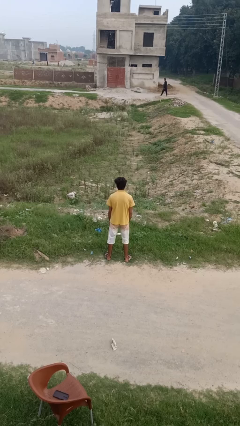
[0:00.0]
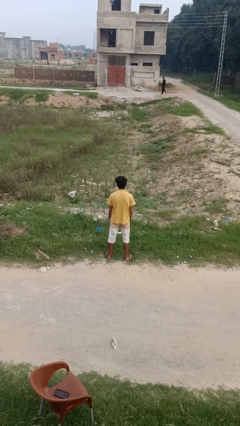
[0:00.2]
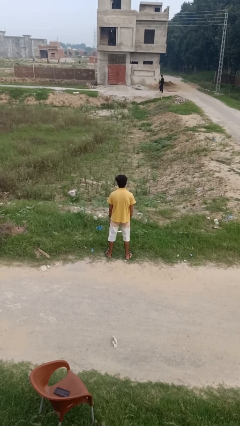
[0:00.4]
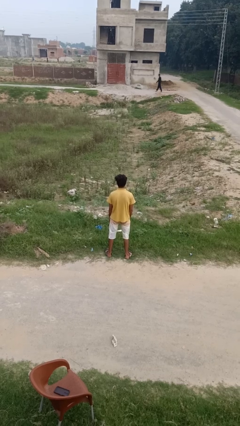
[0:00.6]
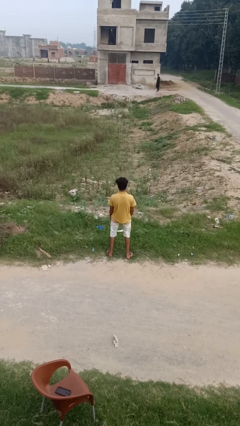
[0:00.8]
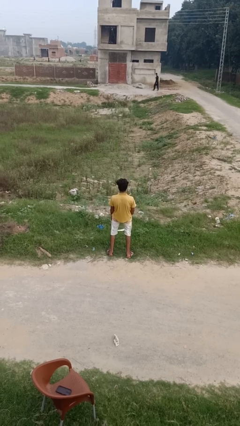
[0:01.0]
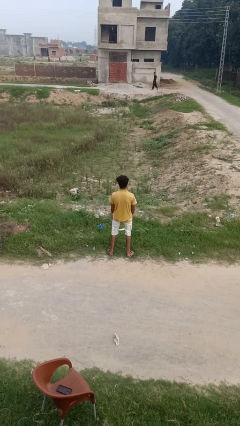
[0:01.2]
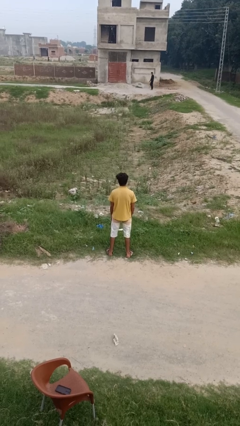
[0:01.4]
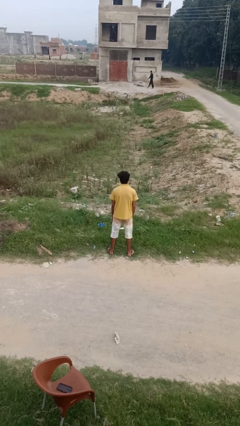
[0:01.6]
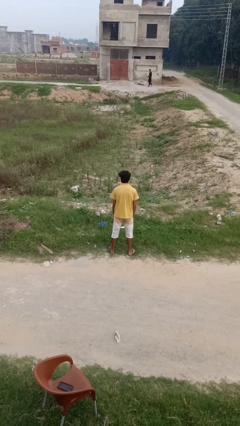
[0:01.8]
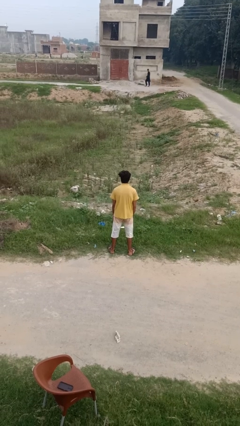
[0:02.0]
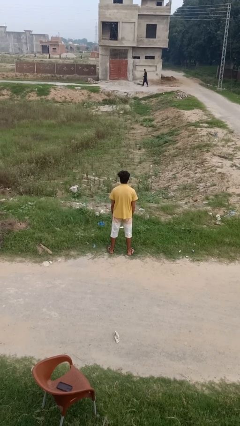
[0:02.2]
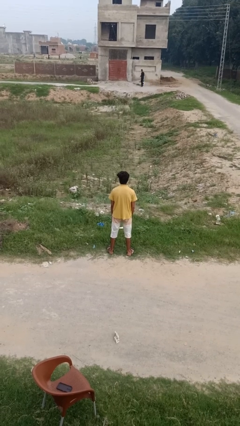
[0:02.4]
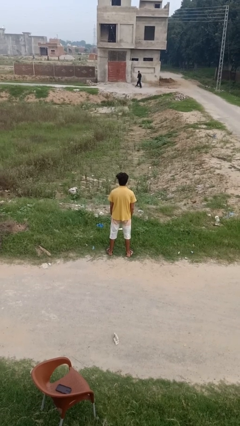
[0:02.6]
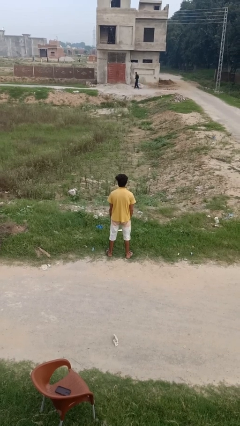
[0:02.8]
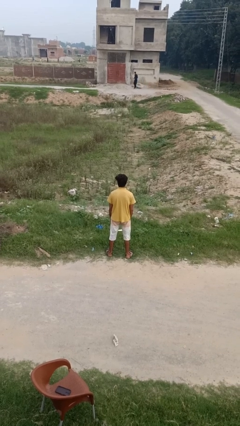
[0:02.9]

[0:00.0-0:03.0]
person wiggles hips

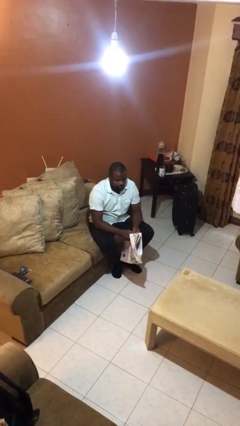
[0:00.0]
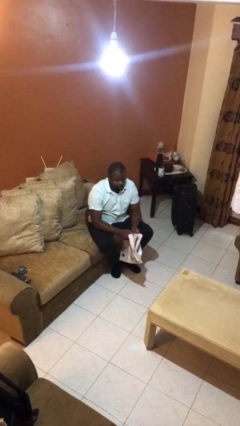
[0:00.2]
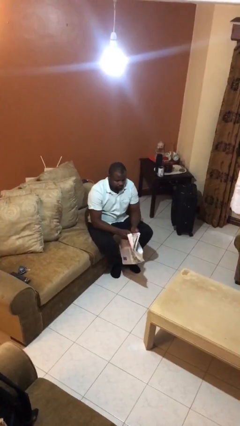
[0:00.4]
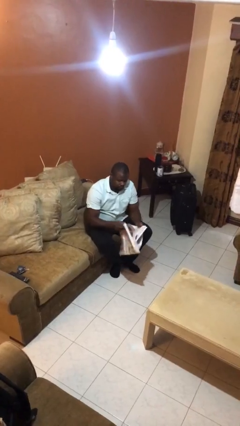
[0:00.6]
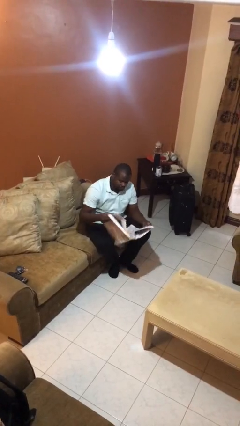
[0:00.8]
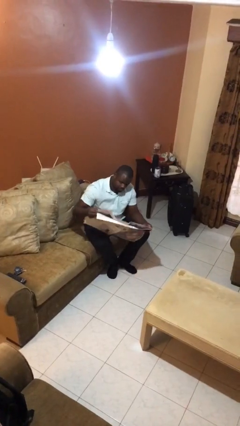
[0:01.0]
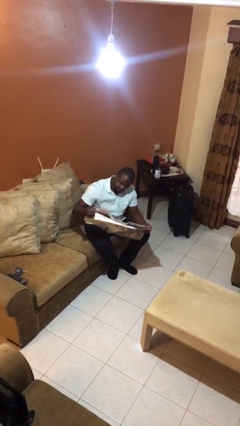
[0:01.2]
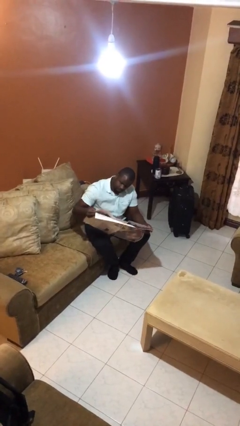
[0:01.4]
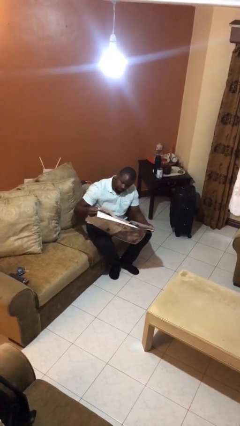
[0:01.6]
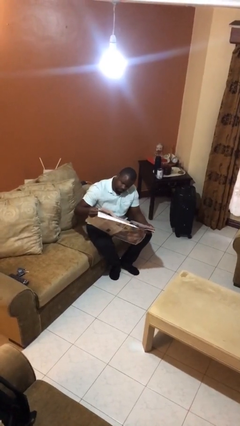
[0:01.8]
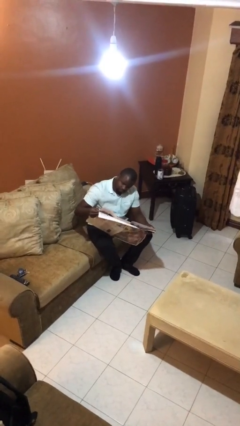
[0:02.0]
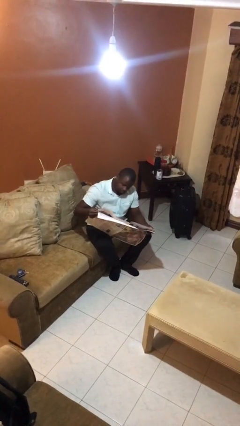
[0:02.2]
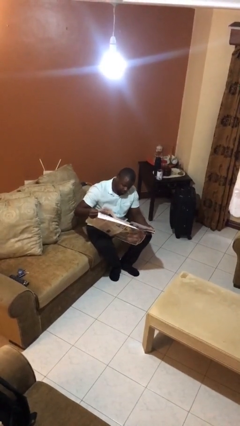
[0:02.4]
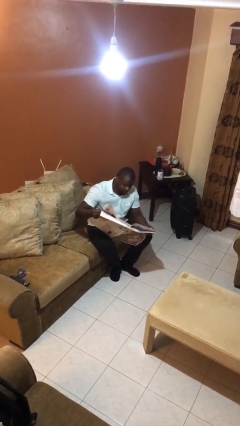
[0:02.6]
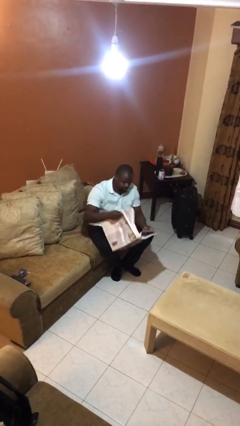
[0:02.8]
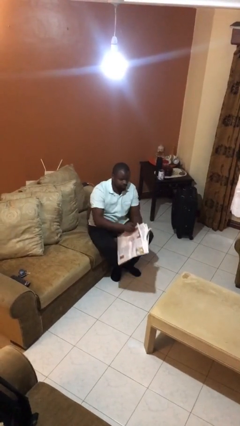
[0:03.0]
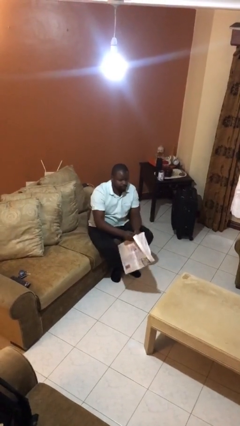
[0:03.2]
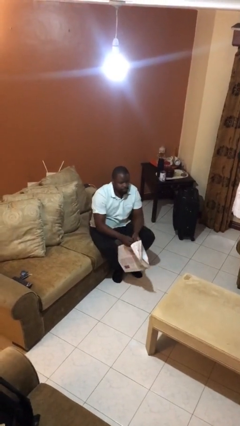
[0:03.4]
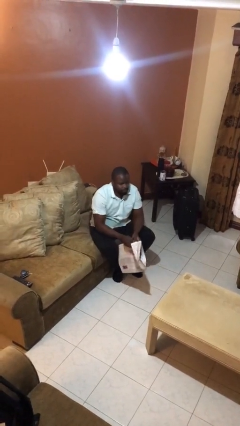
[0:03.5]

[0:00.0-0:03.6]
person reads newspaper

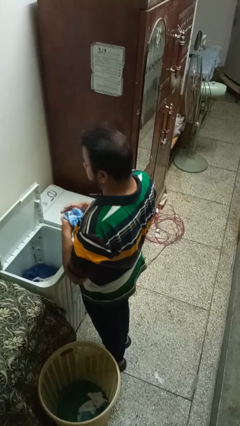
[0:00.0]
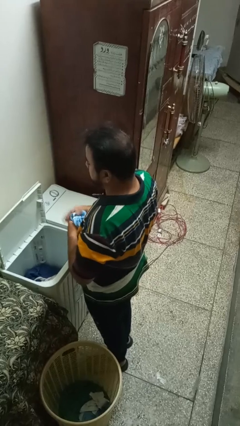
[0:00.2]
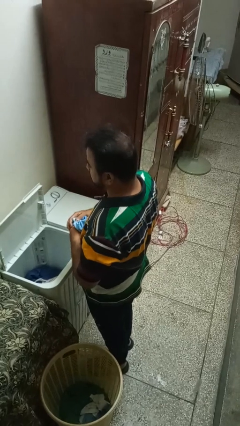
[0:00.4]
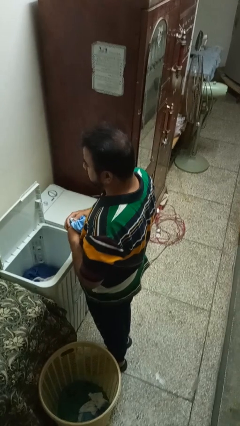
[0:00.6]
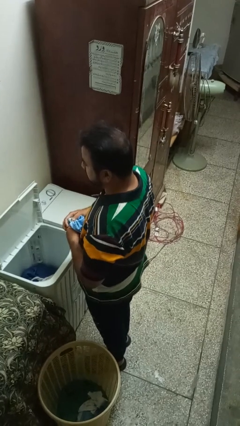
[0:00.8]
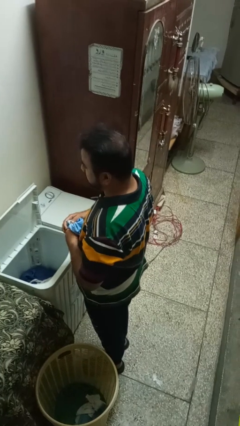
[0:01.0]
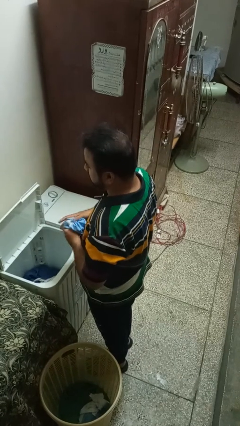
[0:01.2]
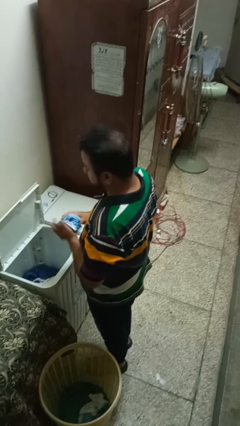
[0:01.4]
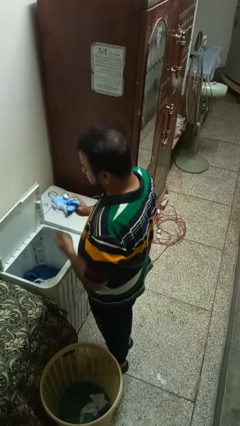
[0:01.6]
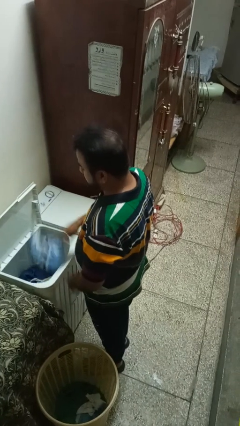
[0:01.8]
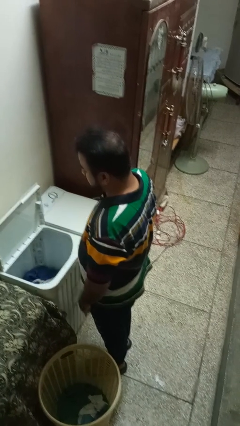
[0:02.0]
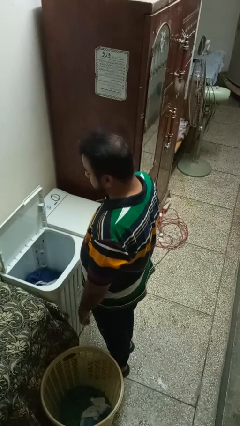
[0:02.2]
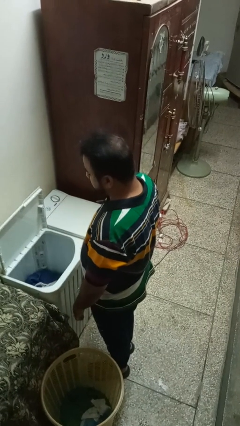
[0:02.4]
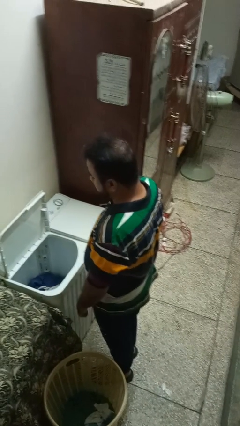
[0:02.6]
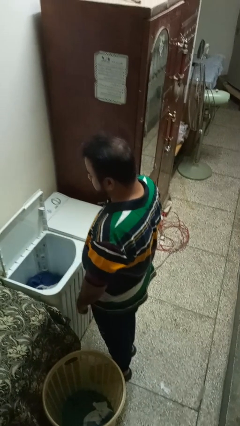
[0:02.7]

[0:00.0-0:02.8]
person loads clotheswasher

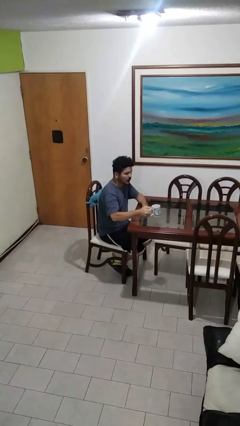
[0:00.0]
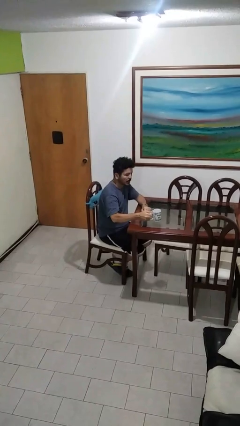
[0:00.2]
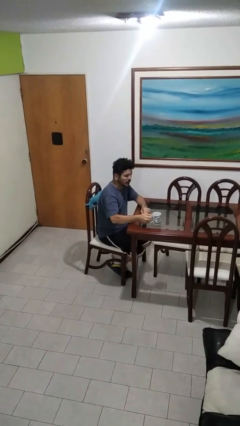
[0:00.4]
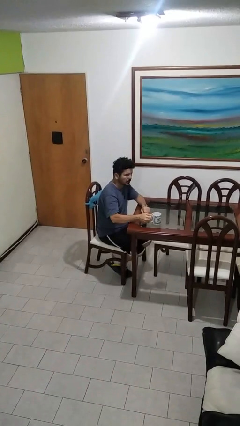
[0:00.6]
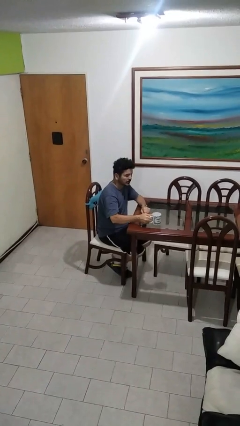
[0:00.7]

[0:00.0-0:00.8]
person puts down object on table

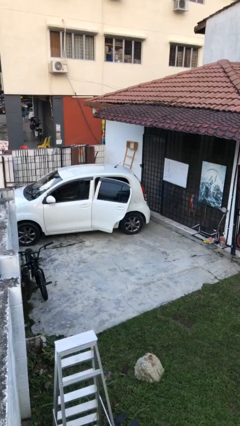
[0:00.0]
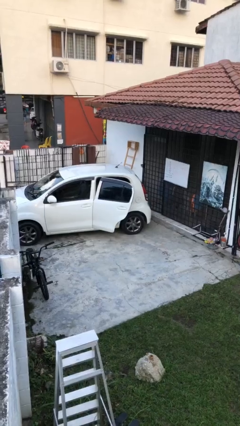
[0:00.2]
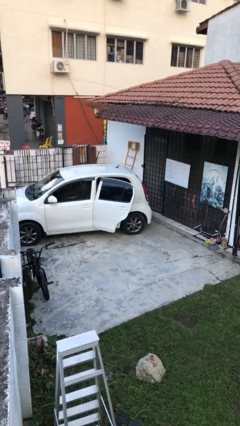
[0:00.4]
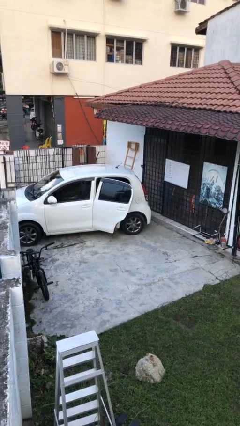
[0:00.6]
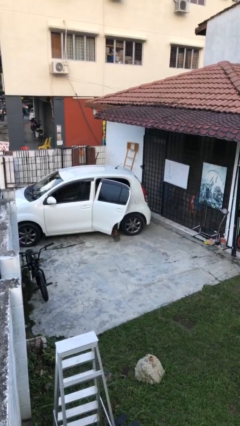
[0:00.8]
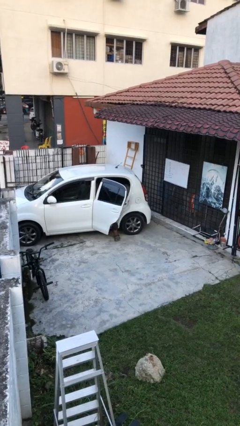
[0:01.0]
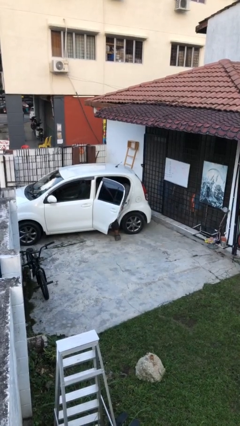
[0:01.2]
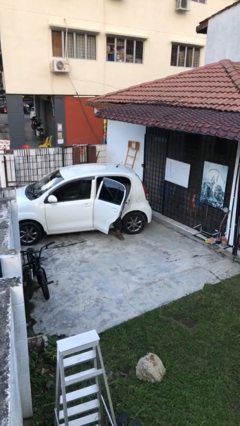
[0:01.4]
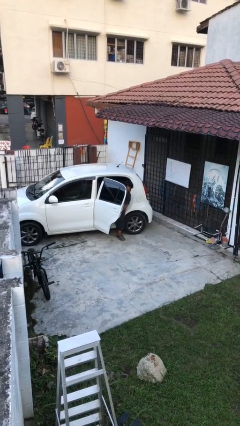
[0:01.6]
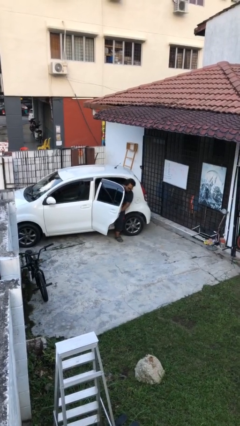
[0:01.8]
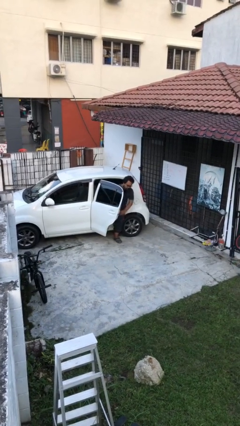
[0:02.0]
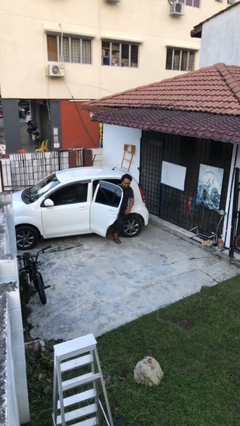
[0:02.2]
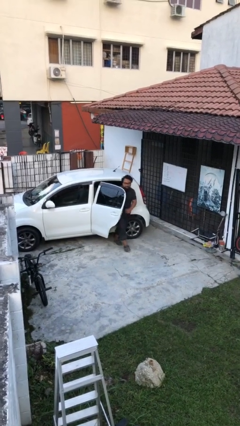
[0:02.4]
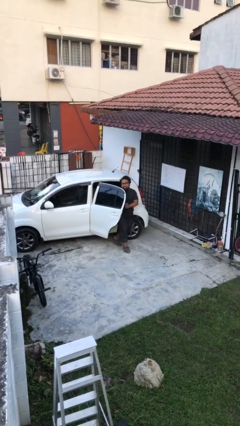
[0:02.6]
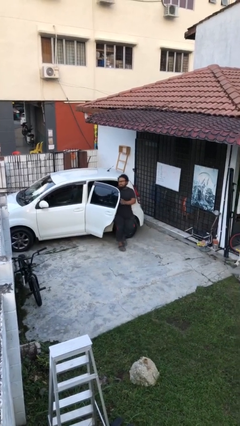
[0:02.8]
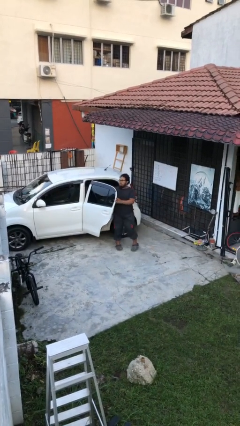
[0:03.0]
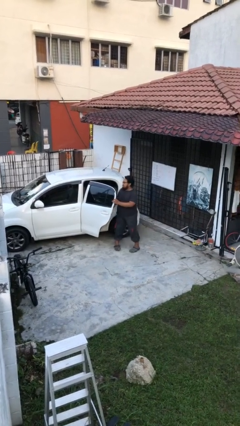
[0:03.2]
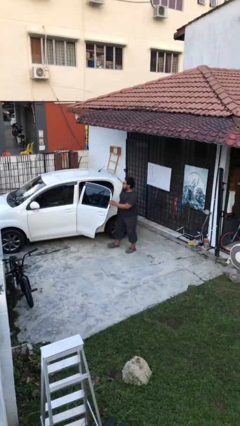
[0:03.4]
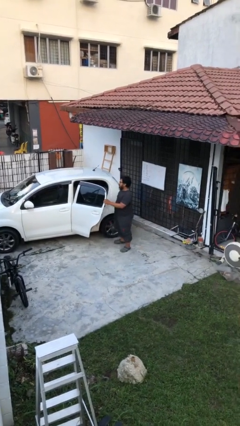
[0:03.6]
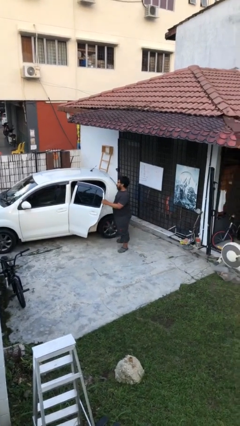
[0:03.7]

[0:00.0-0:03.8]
person exits car

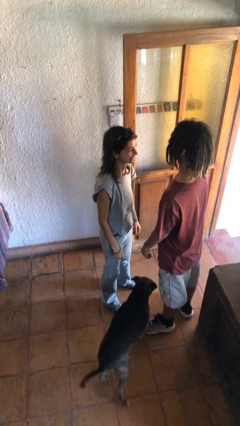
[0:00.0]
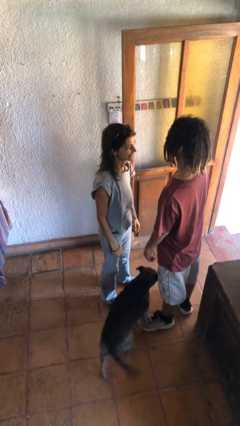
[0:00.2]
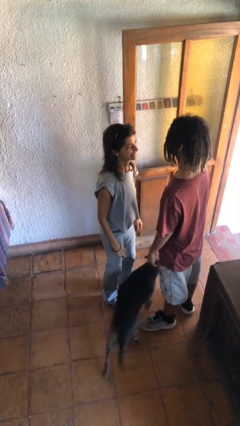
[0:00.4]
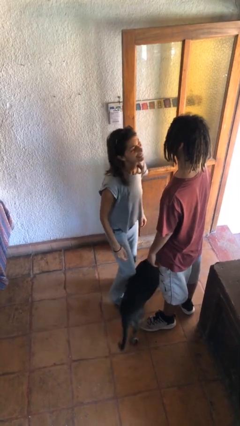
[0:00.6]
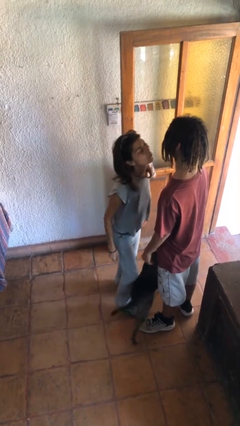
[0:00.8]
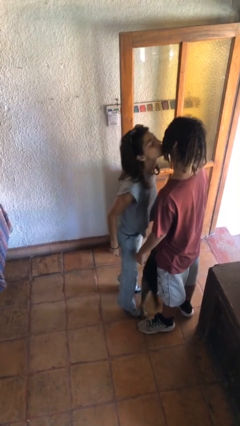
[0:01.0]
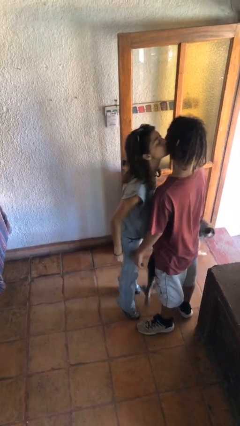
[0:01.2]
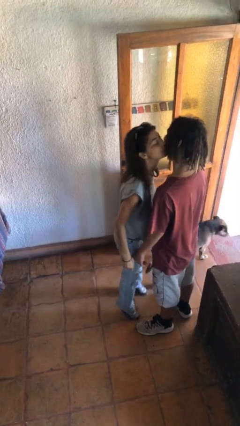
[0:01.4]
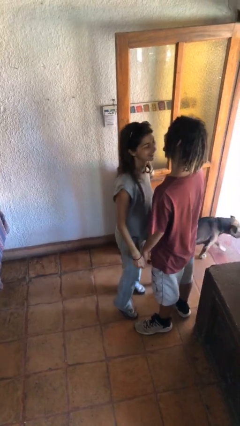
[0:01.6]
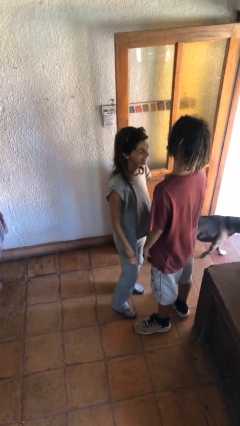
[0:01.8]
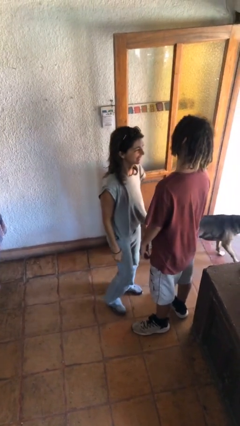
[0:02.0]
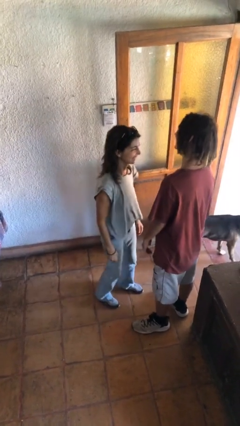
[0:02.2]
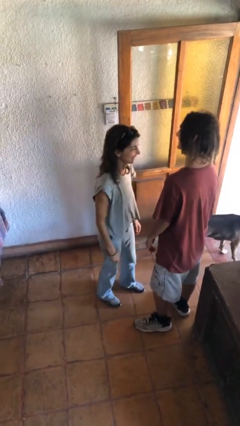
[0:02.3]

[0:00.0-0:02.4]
person kisses cheek of person

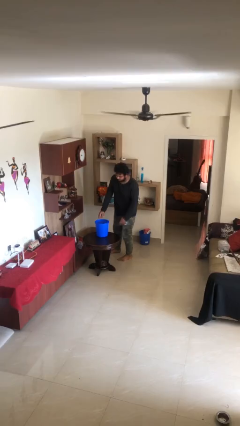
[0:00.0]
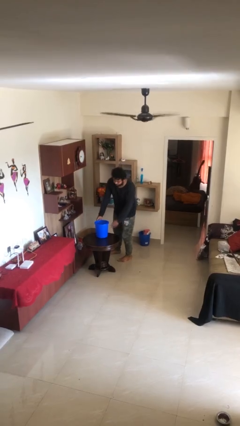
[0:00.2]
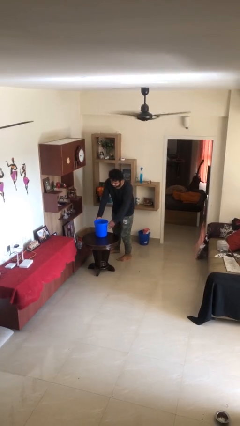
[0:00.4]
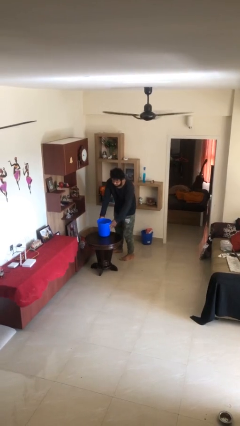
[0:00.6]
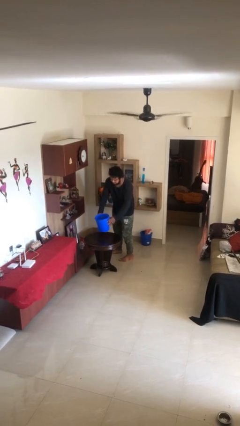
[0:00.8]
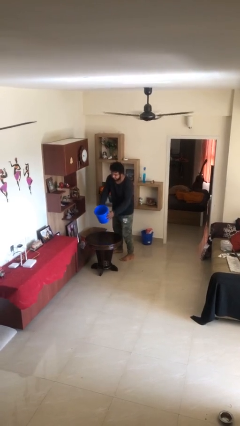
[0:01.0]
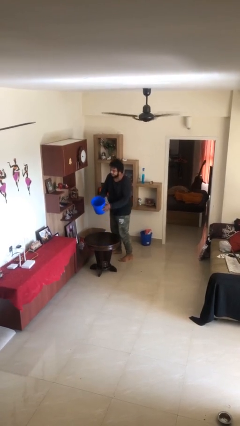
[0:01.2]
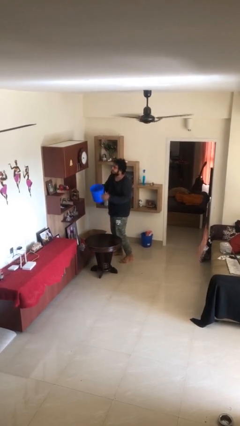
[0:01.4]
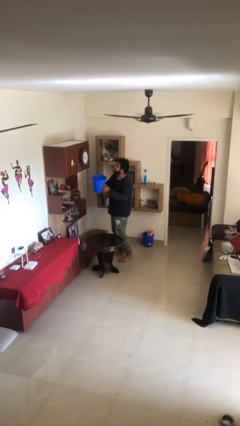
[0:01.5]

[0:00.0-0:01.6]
person picks up object from table
